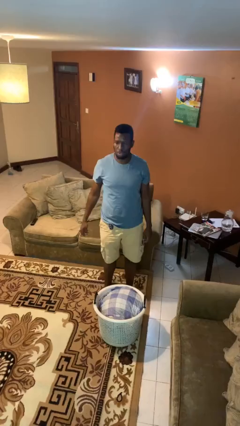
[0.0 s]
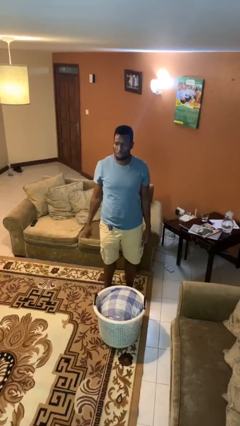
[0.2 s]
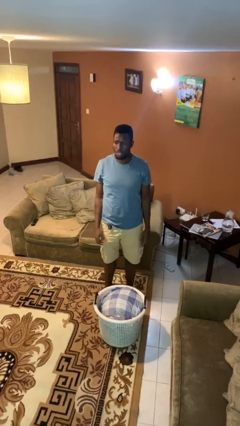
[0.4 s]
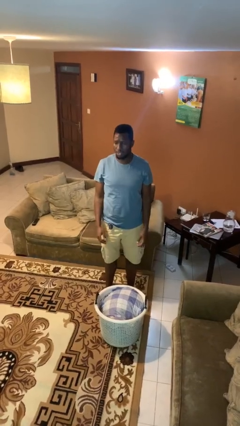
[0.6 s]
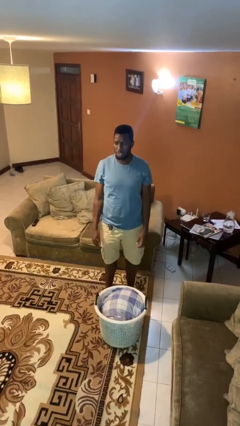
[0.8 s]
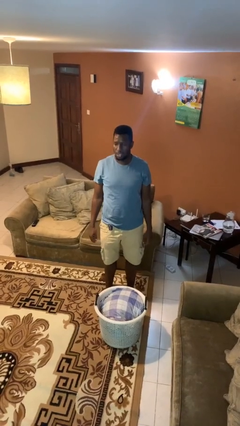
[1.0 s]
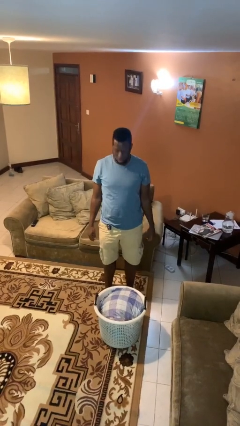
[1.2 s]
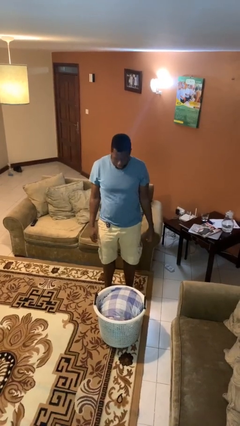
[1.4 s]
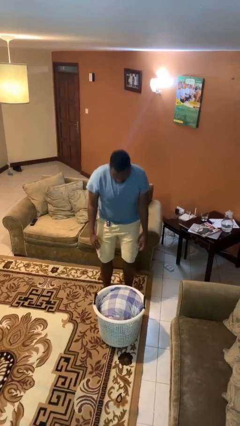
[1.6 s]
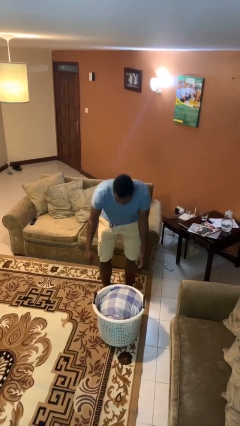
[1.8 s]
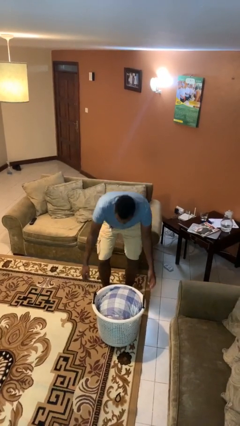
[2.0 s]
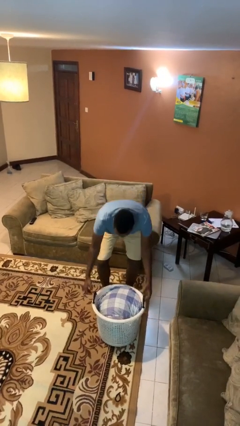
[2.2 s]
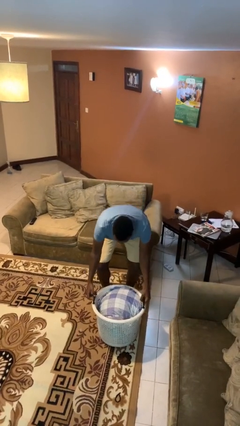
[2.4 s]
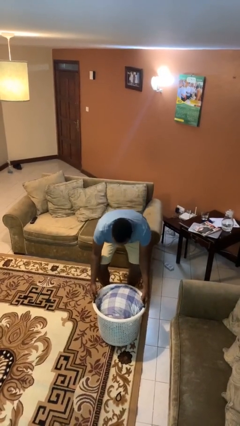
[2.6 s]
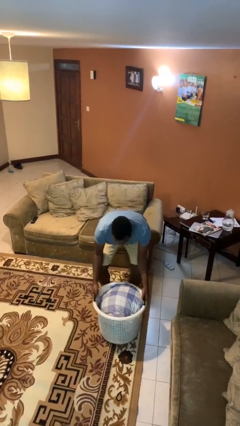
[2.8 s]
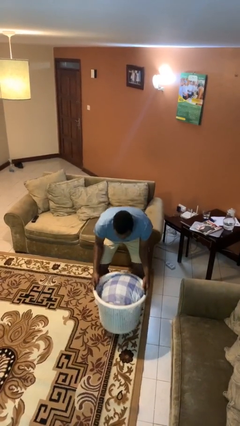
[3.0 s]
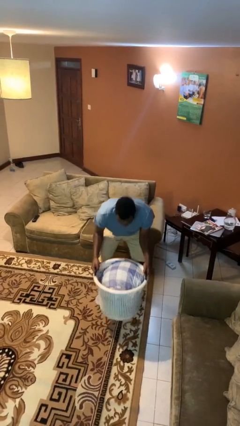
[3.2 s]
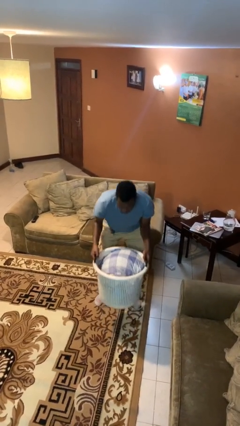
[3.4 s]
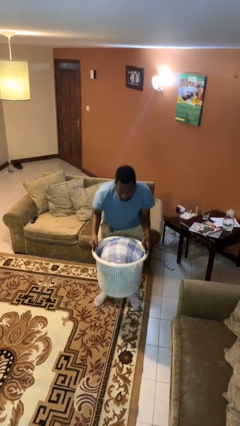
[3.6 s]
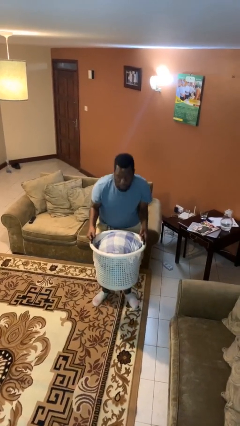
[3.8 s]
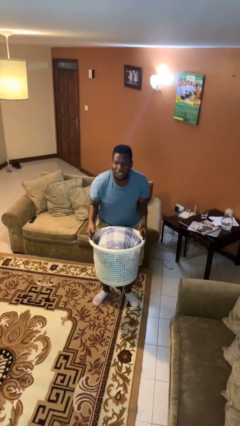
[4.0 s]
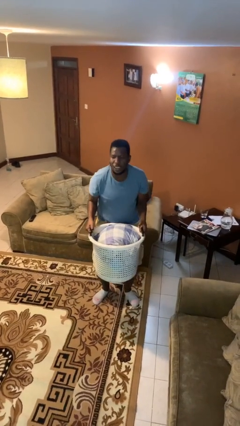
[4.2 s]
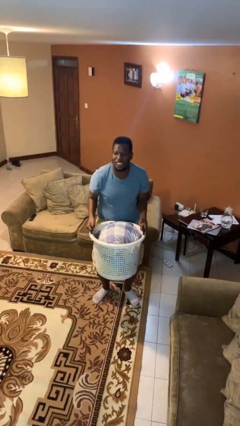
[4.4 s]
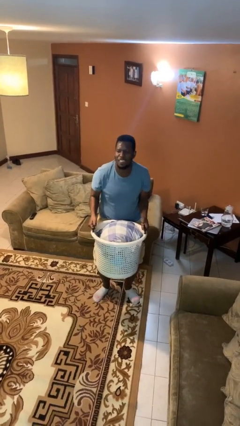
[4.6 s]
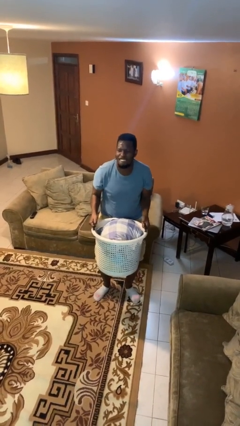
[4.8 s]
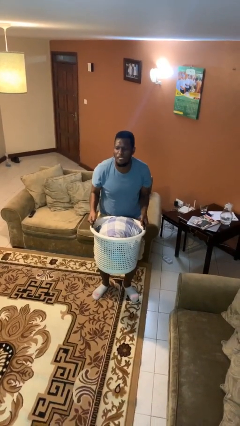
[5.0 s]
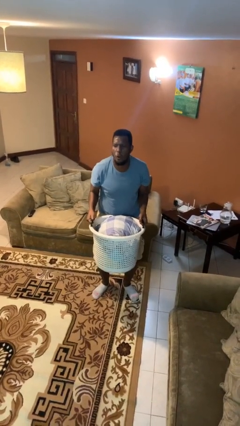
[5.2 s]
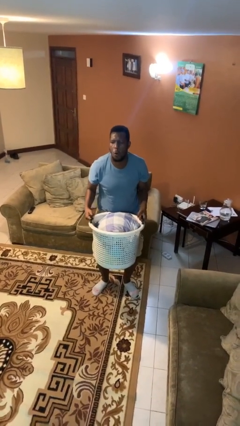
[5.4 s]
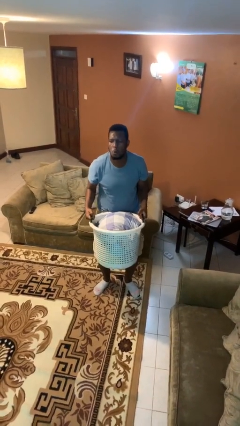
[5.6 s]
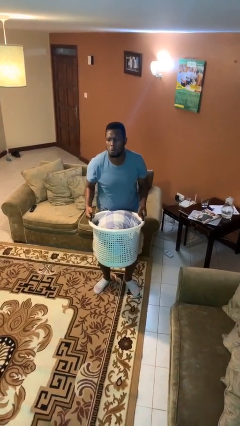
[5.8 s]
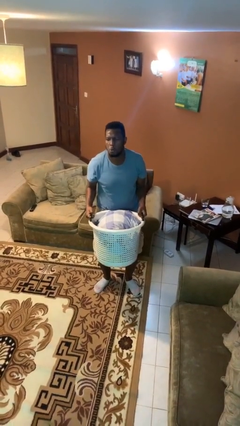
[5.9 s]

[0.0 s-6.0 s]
person picks up object from floor

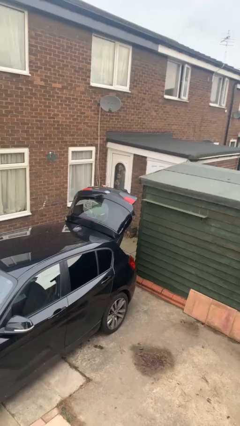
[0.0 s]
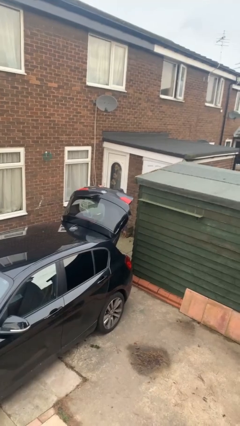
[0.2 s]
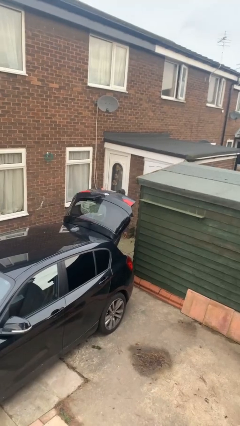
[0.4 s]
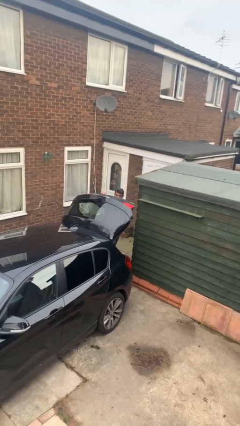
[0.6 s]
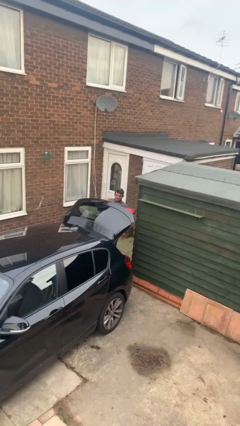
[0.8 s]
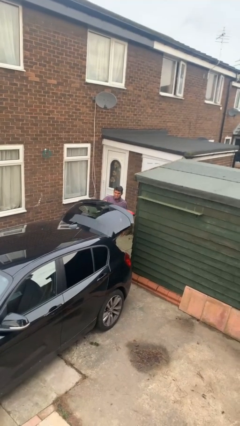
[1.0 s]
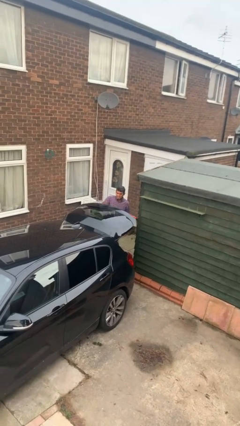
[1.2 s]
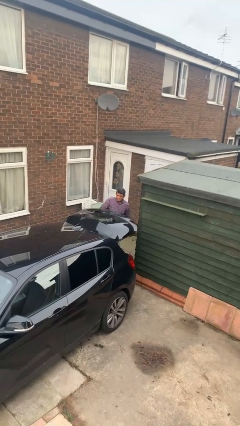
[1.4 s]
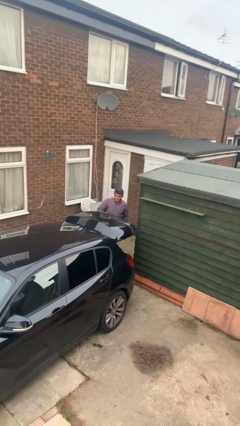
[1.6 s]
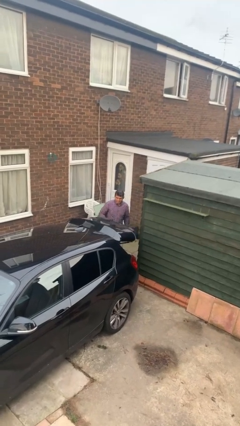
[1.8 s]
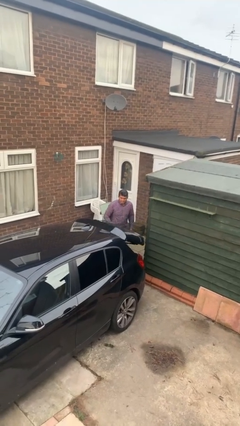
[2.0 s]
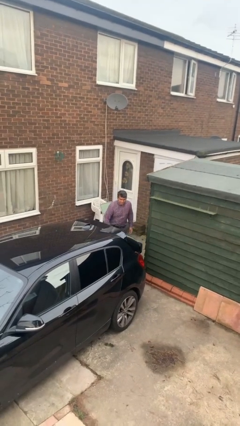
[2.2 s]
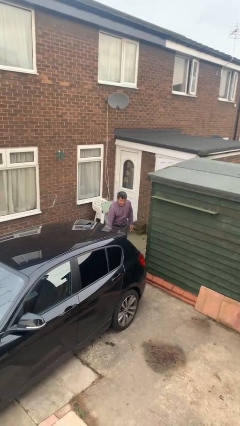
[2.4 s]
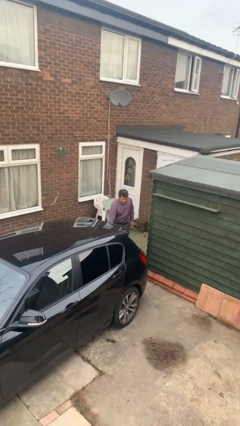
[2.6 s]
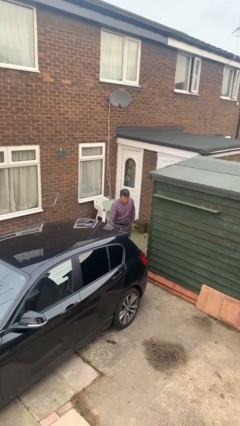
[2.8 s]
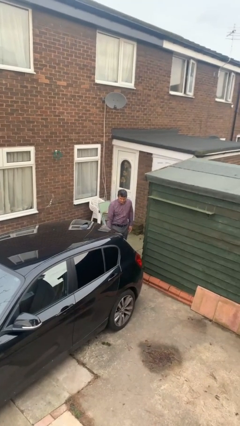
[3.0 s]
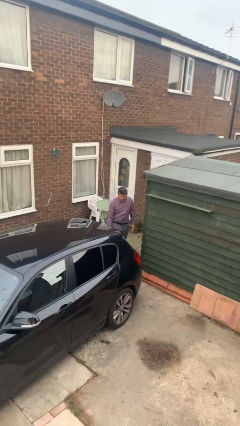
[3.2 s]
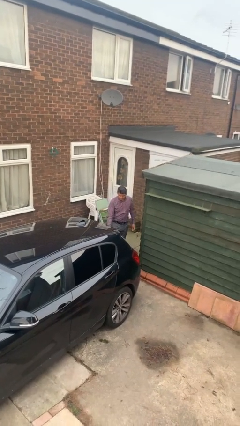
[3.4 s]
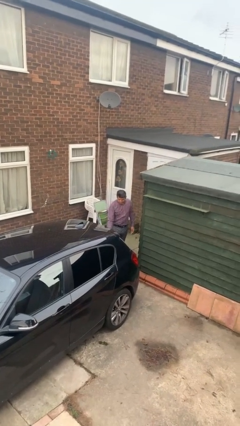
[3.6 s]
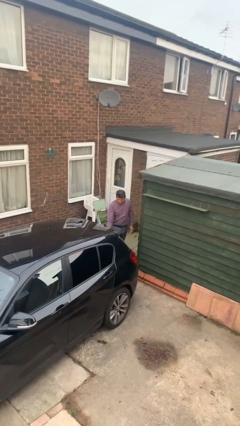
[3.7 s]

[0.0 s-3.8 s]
person closes car trunk

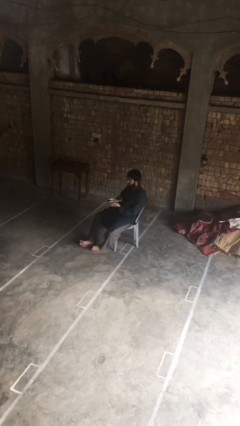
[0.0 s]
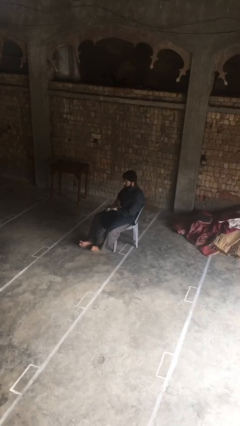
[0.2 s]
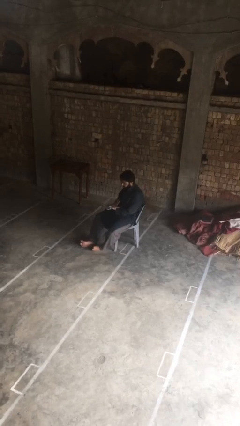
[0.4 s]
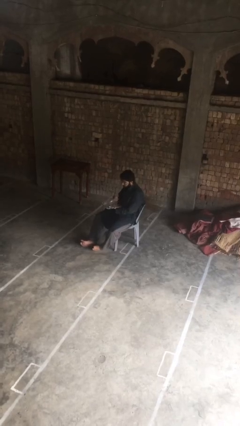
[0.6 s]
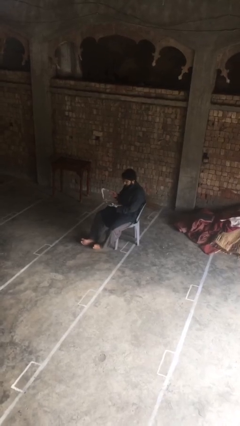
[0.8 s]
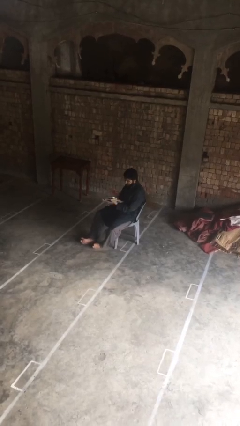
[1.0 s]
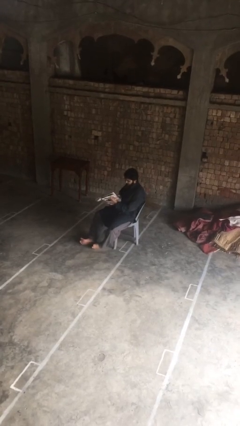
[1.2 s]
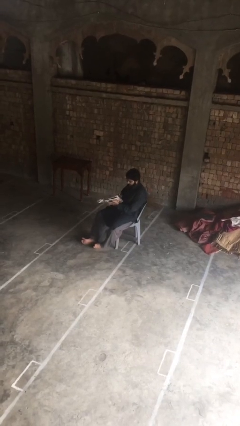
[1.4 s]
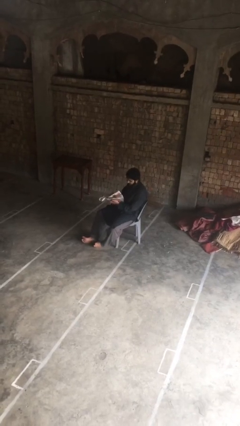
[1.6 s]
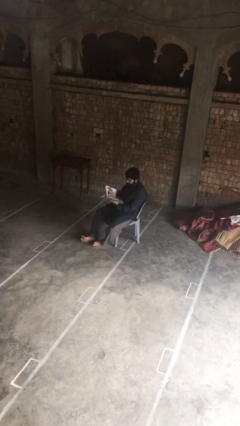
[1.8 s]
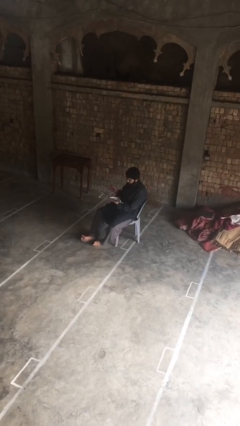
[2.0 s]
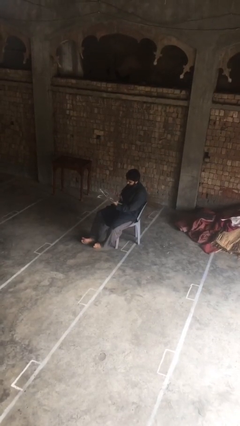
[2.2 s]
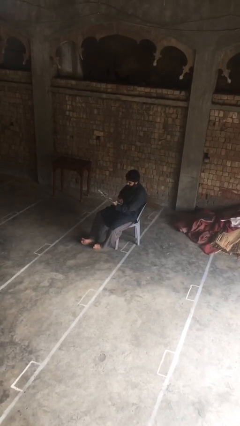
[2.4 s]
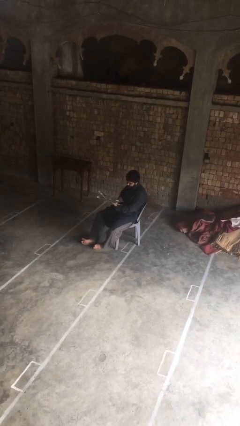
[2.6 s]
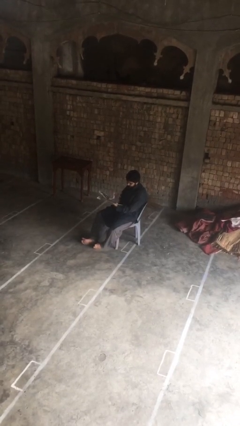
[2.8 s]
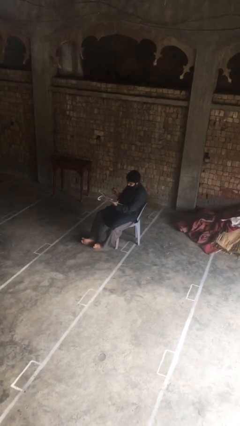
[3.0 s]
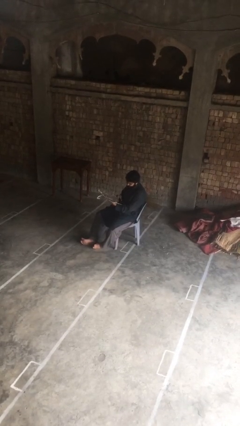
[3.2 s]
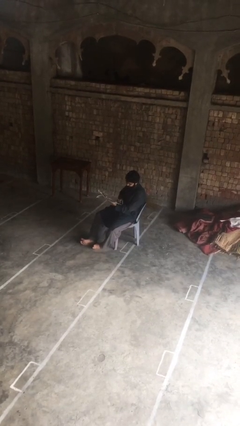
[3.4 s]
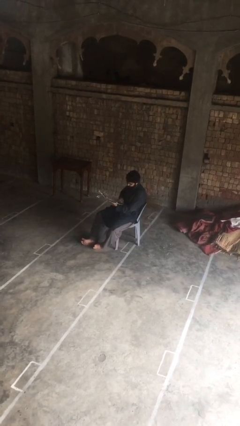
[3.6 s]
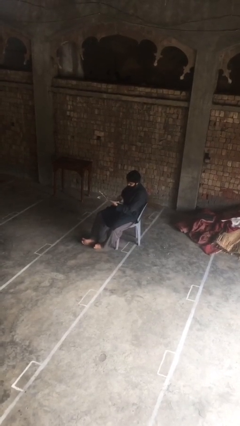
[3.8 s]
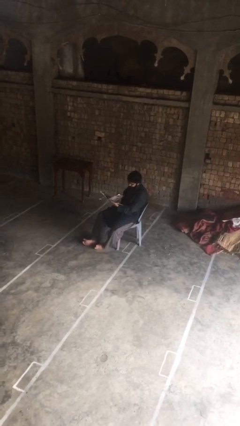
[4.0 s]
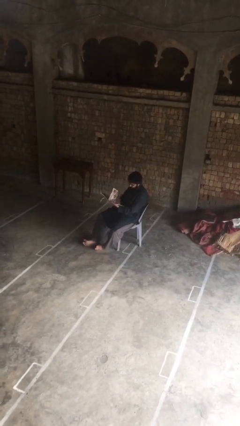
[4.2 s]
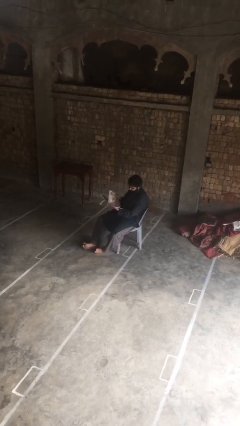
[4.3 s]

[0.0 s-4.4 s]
person reads document

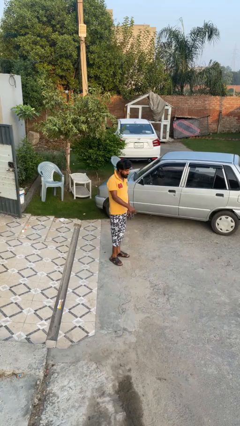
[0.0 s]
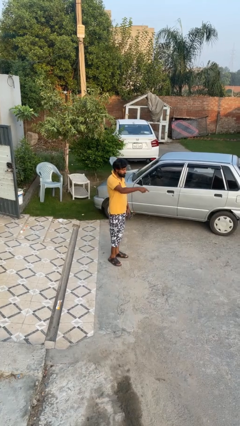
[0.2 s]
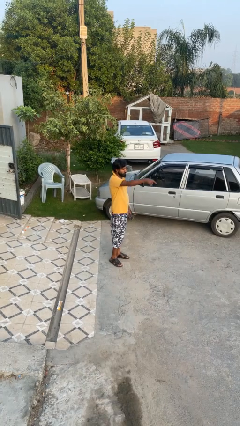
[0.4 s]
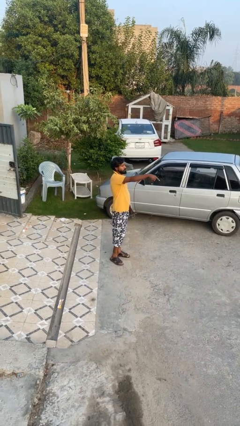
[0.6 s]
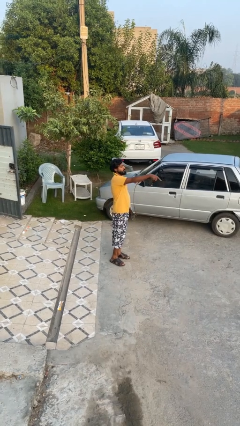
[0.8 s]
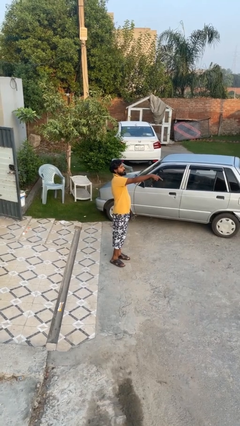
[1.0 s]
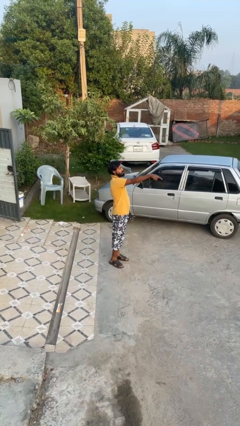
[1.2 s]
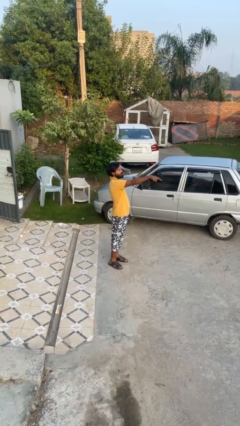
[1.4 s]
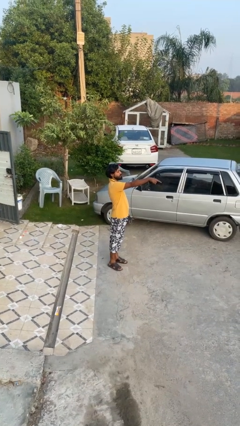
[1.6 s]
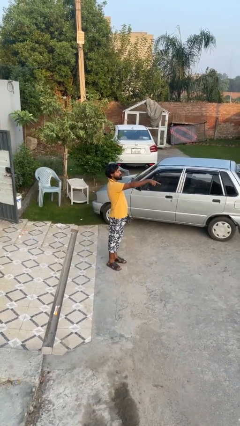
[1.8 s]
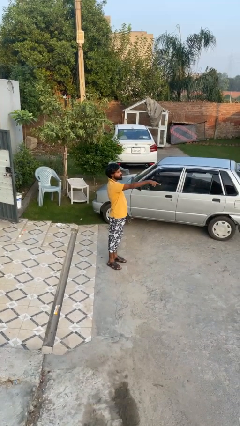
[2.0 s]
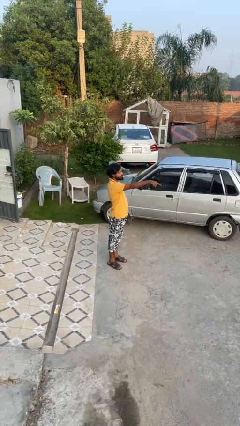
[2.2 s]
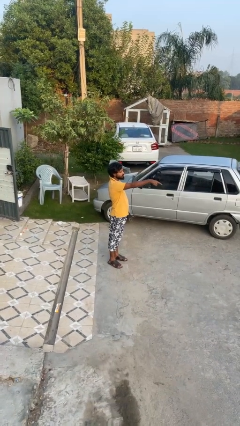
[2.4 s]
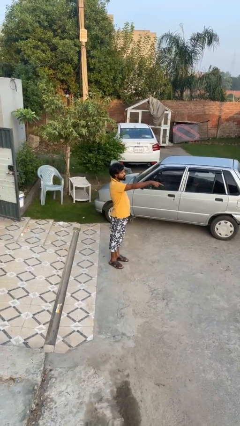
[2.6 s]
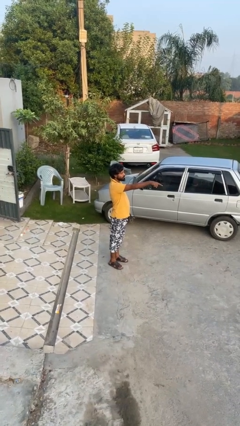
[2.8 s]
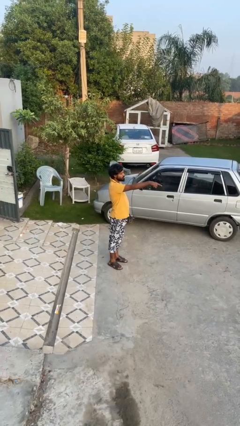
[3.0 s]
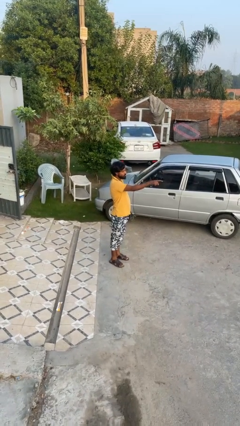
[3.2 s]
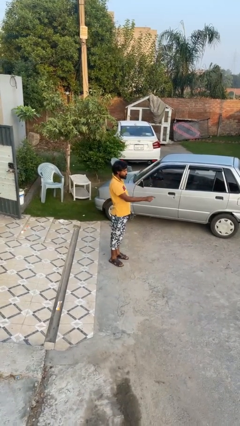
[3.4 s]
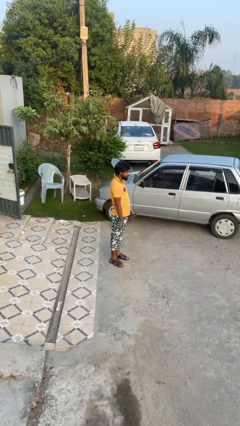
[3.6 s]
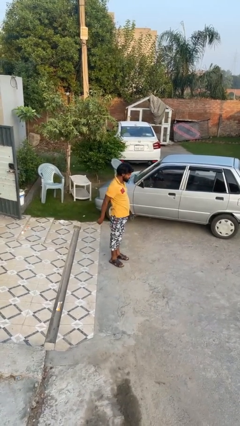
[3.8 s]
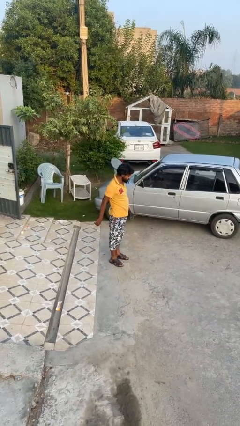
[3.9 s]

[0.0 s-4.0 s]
person points at person
